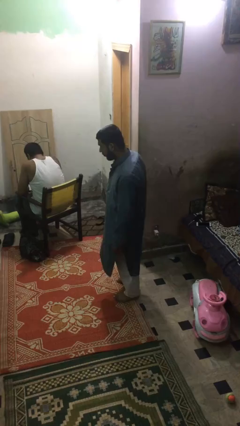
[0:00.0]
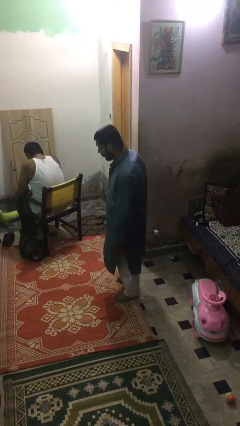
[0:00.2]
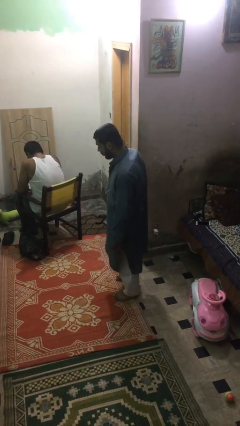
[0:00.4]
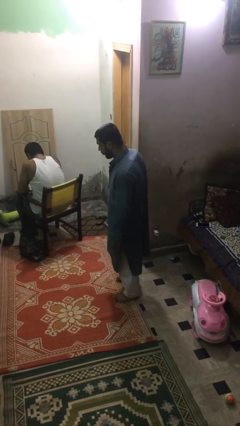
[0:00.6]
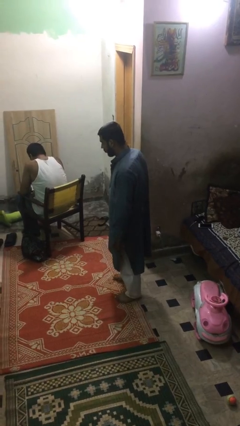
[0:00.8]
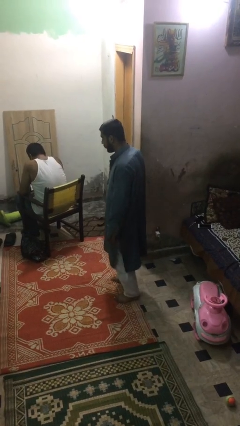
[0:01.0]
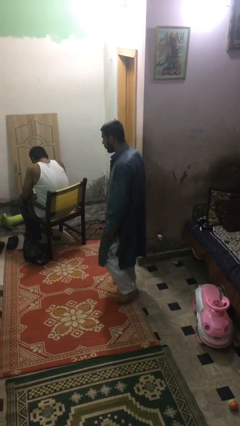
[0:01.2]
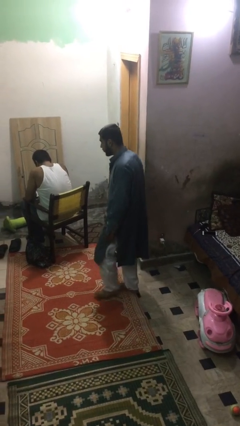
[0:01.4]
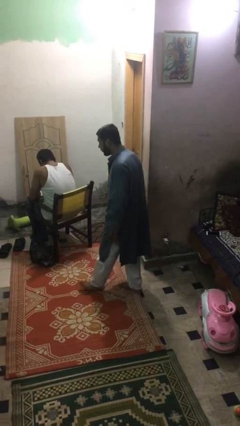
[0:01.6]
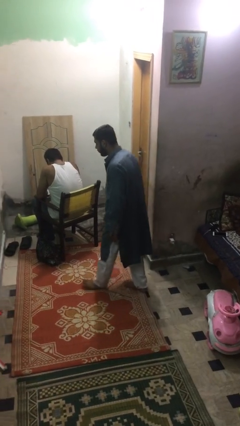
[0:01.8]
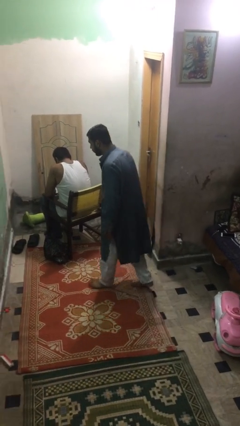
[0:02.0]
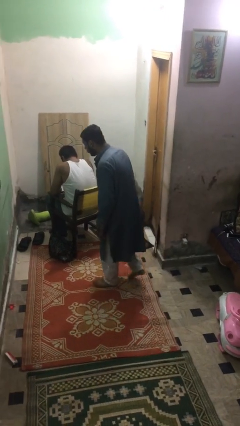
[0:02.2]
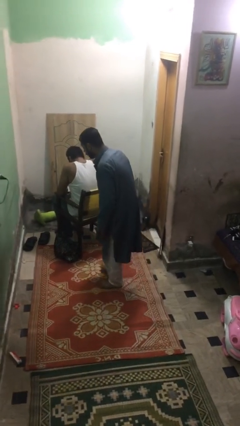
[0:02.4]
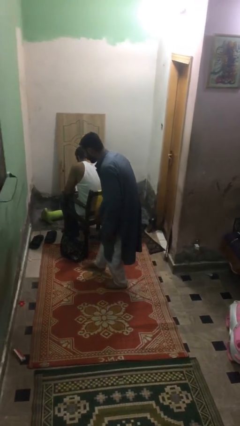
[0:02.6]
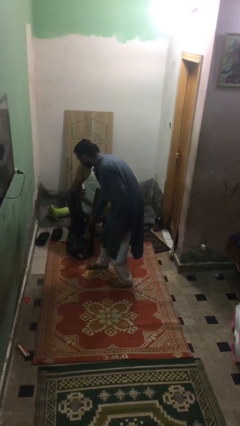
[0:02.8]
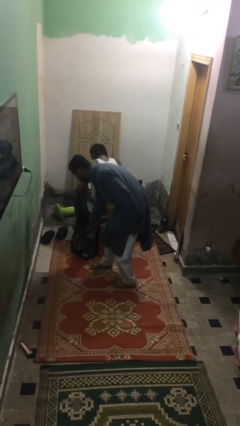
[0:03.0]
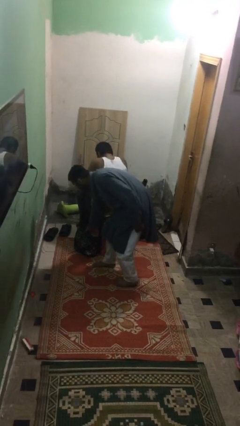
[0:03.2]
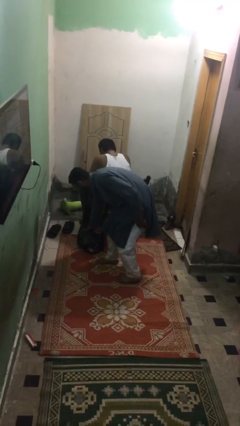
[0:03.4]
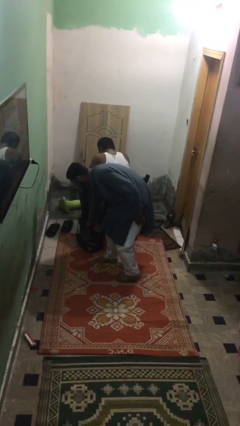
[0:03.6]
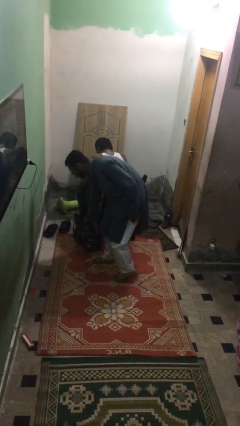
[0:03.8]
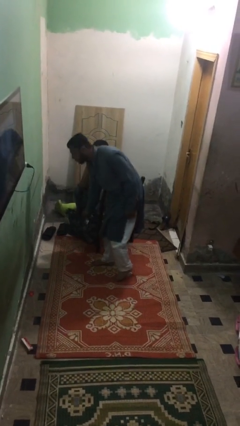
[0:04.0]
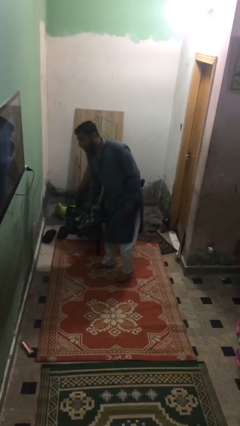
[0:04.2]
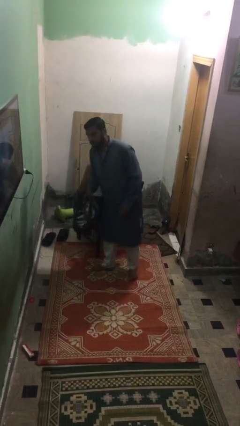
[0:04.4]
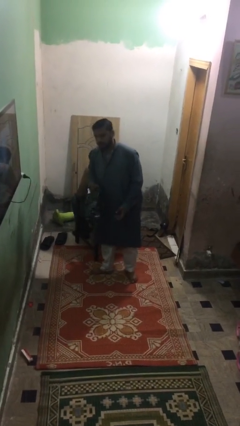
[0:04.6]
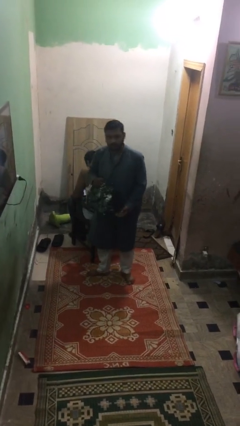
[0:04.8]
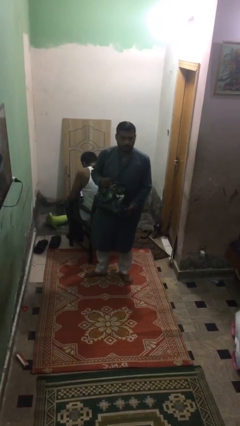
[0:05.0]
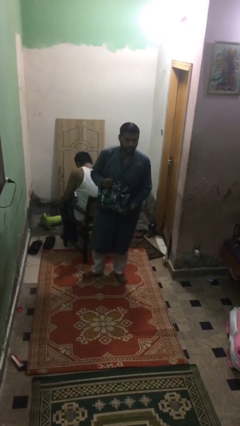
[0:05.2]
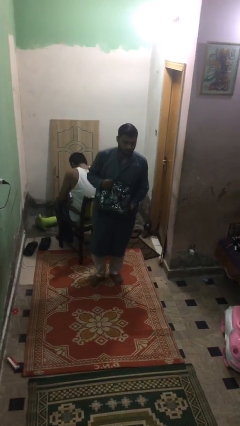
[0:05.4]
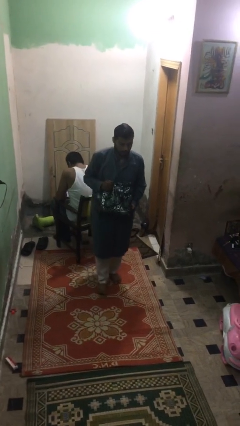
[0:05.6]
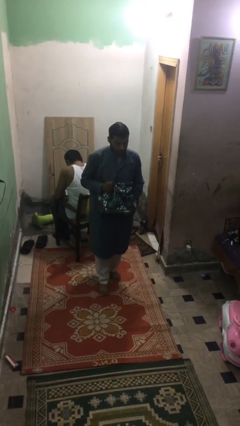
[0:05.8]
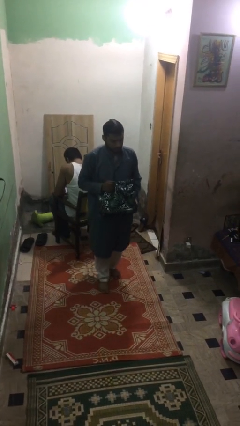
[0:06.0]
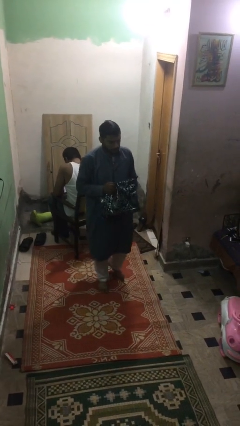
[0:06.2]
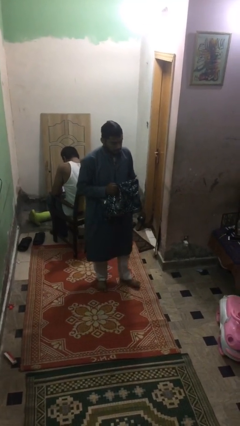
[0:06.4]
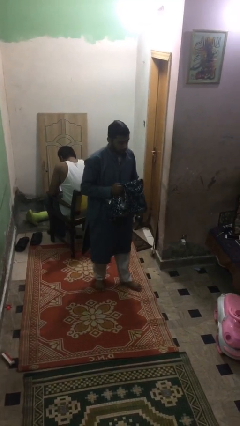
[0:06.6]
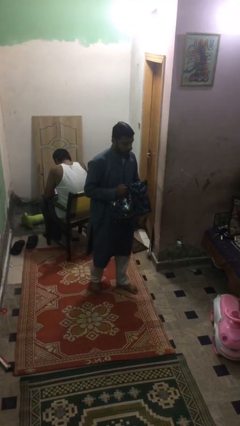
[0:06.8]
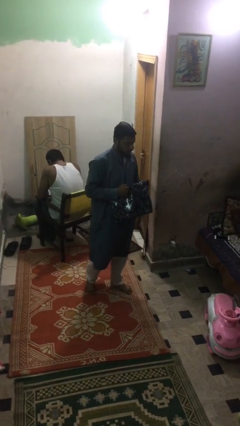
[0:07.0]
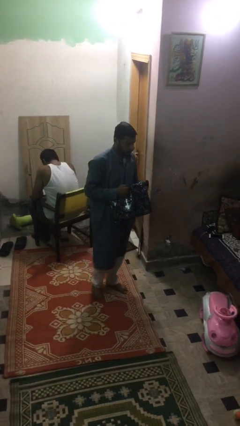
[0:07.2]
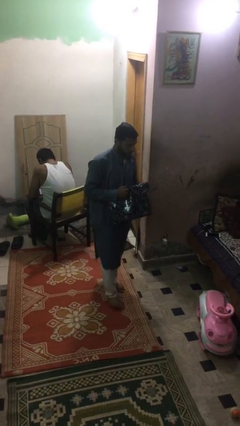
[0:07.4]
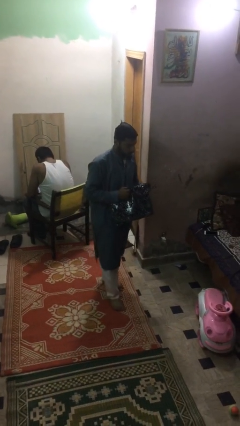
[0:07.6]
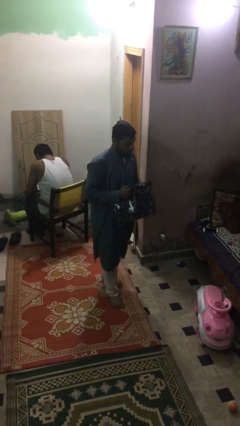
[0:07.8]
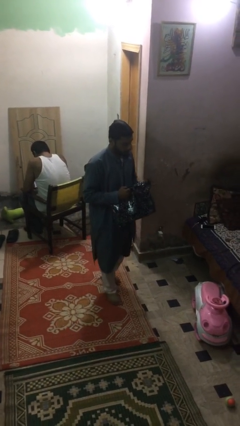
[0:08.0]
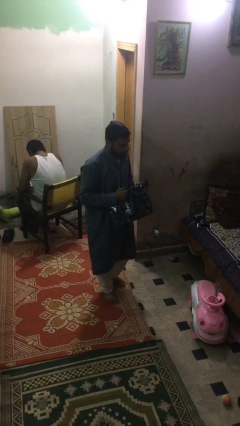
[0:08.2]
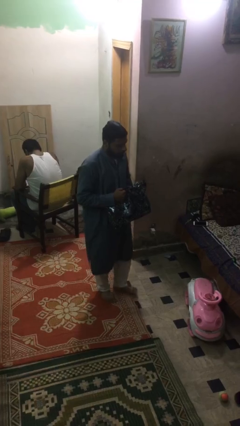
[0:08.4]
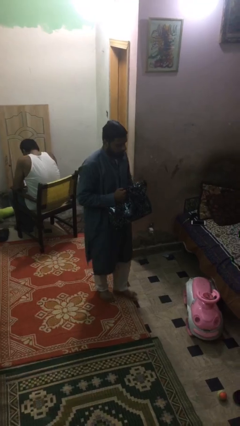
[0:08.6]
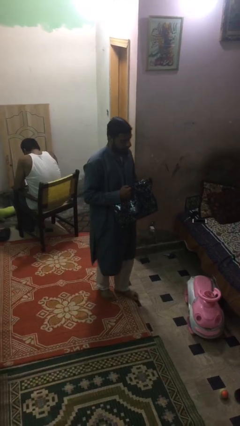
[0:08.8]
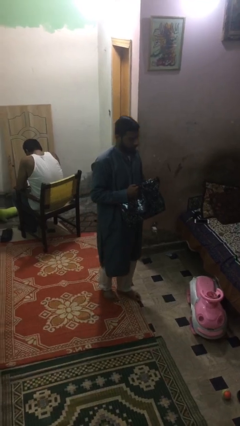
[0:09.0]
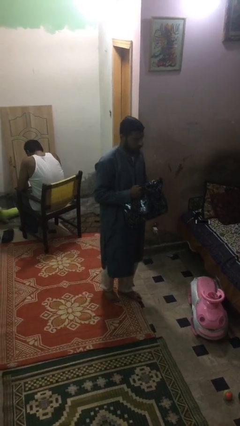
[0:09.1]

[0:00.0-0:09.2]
person steals object from person

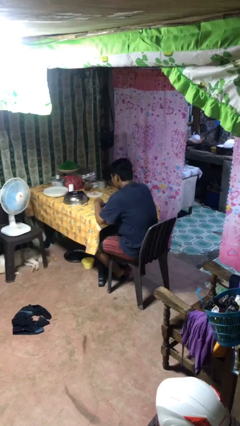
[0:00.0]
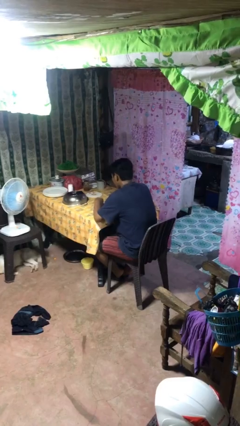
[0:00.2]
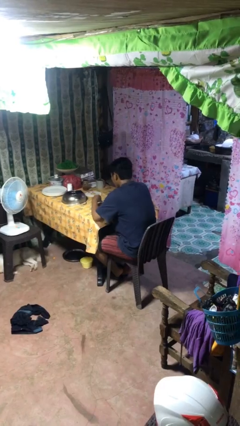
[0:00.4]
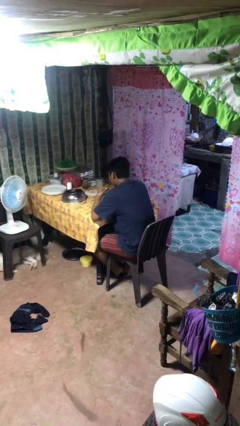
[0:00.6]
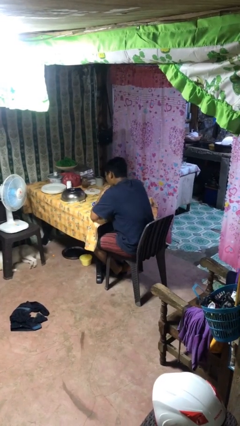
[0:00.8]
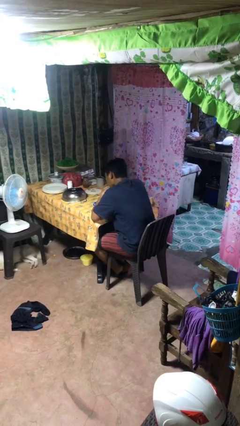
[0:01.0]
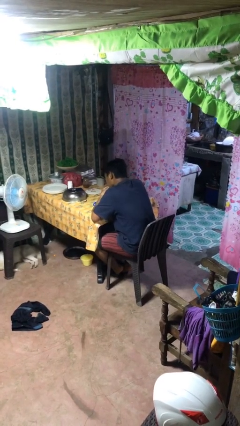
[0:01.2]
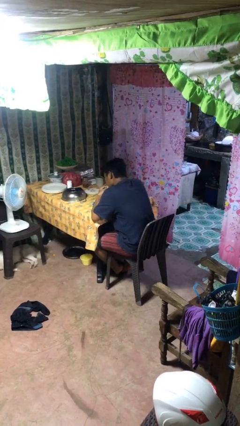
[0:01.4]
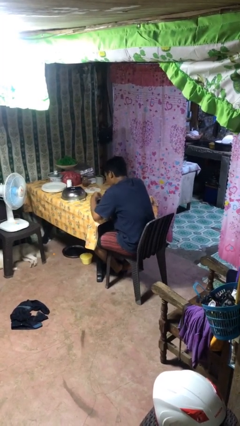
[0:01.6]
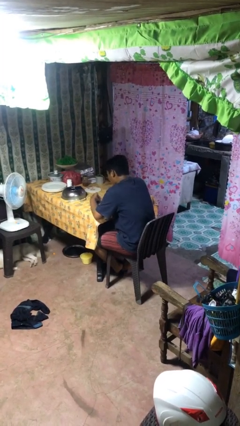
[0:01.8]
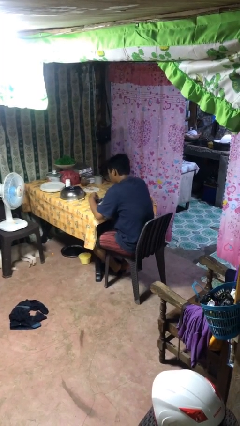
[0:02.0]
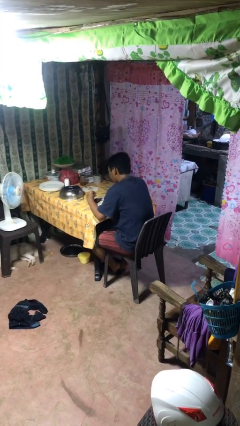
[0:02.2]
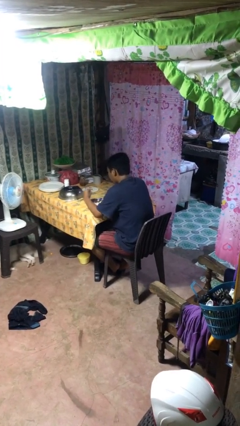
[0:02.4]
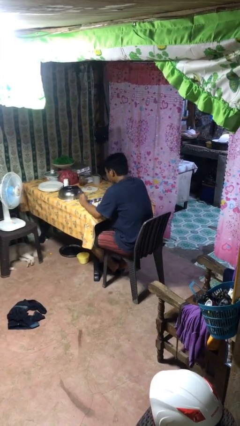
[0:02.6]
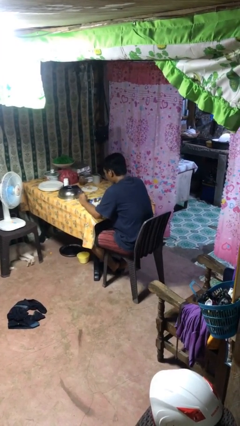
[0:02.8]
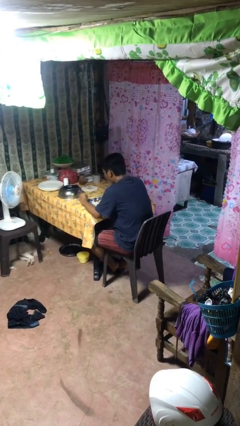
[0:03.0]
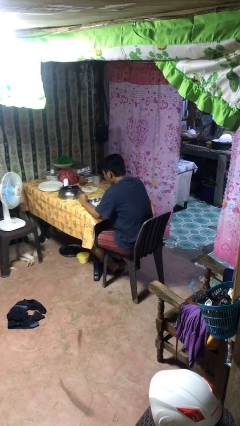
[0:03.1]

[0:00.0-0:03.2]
person eats with hands

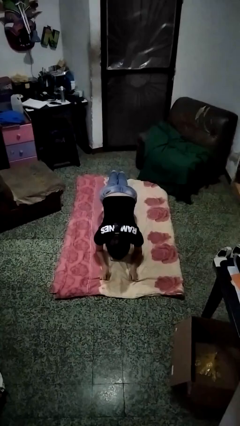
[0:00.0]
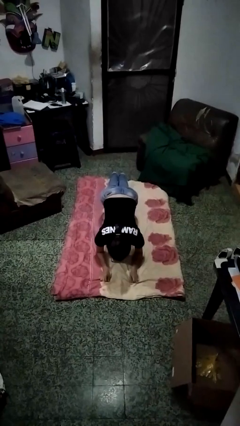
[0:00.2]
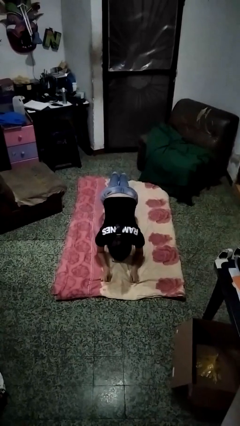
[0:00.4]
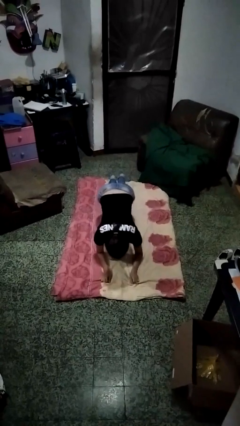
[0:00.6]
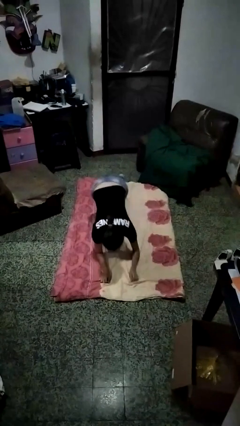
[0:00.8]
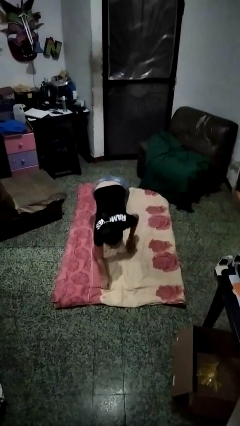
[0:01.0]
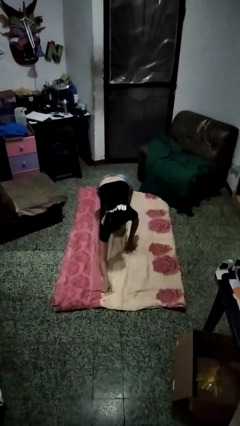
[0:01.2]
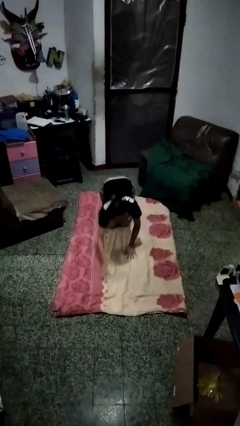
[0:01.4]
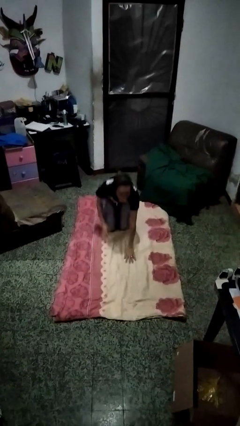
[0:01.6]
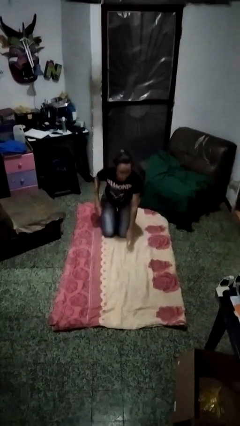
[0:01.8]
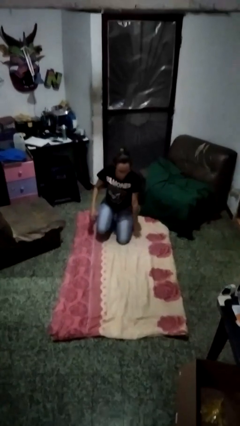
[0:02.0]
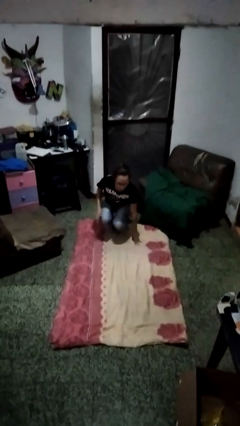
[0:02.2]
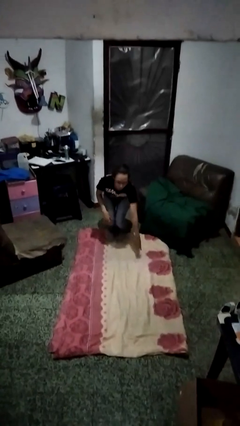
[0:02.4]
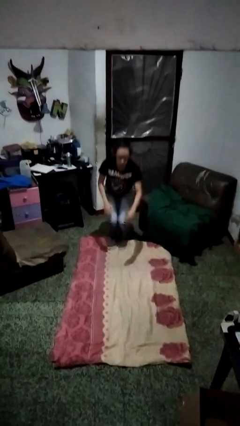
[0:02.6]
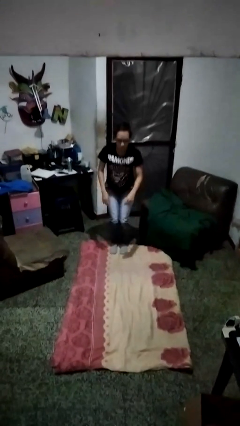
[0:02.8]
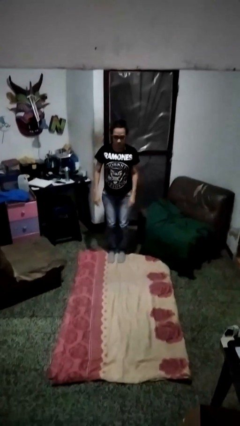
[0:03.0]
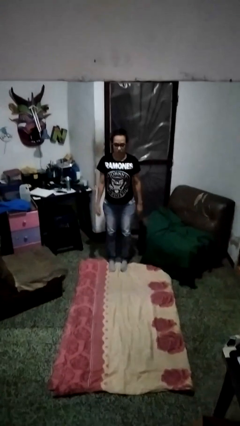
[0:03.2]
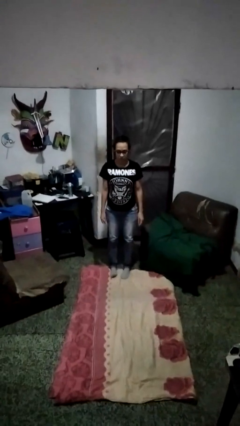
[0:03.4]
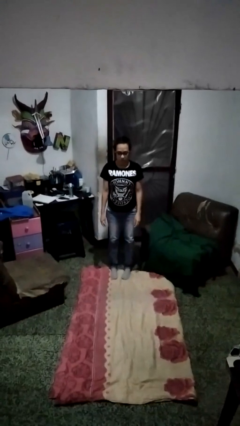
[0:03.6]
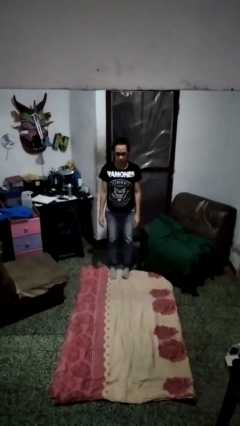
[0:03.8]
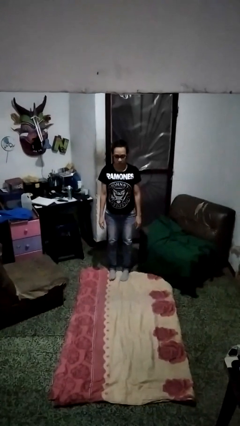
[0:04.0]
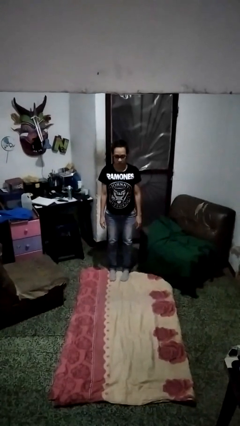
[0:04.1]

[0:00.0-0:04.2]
person stands up from floor

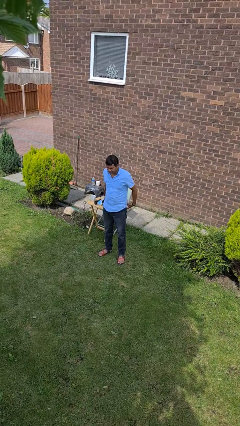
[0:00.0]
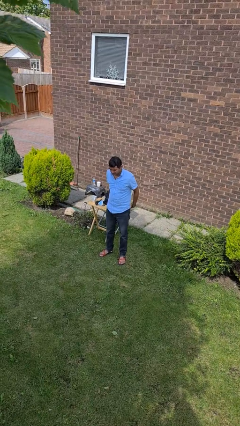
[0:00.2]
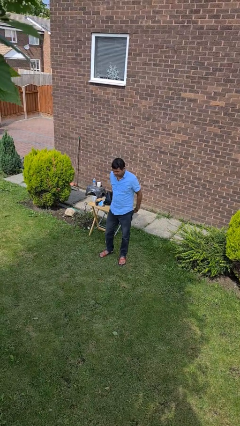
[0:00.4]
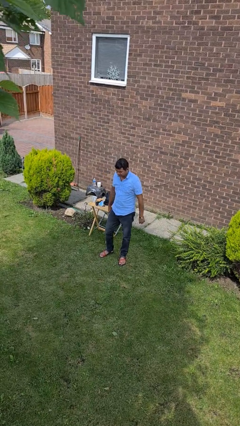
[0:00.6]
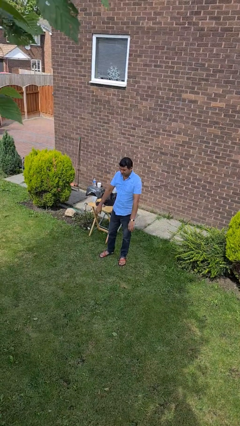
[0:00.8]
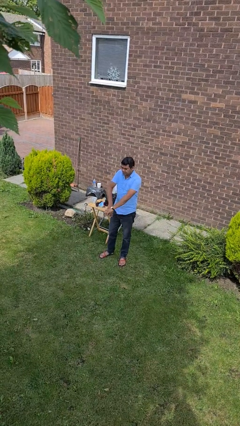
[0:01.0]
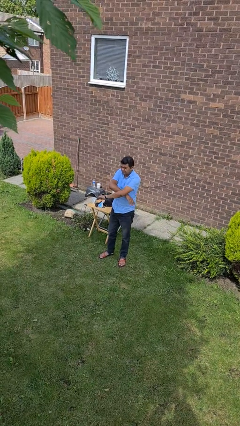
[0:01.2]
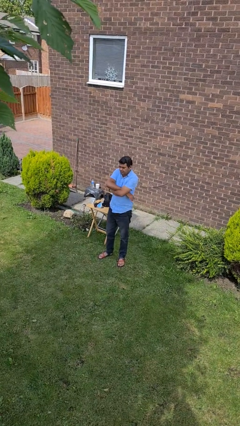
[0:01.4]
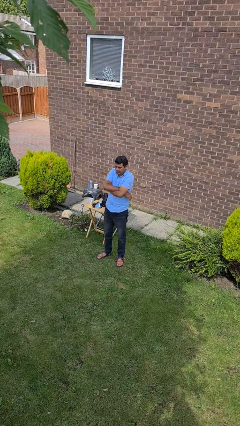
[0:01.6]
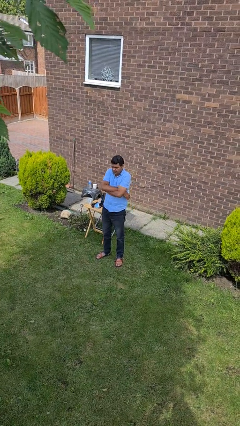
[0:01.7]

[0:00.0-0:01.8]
person crosses arms
